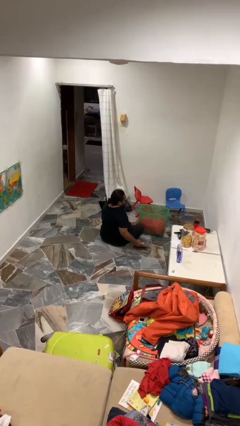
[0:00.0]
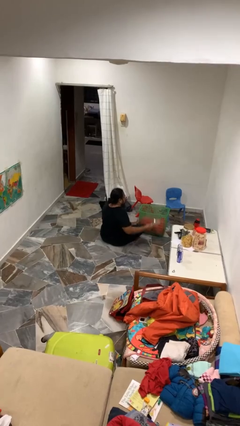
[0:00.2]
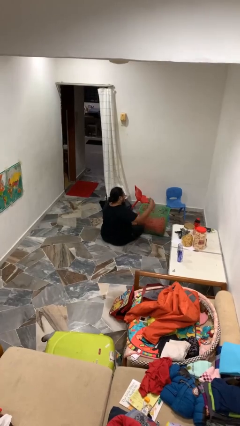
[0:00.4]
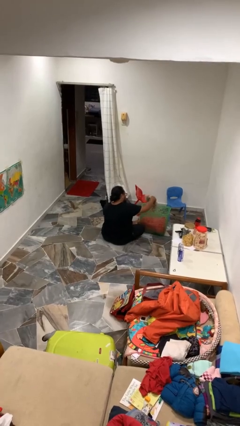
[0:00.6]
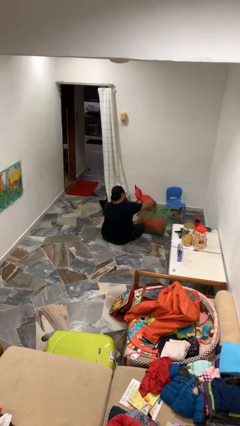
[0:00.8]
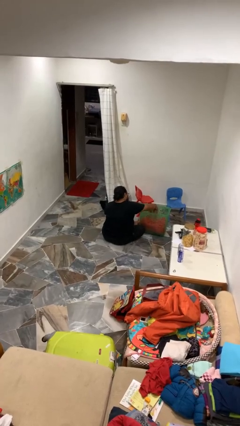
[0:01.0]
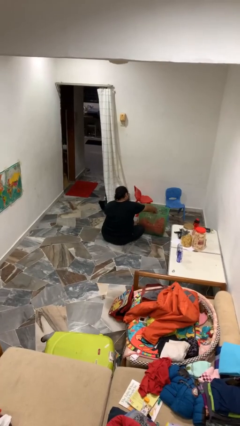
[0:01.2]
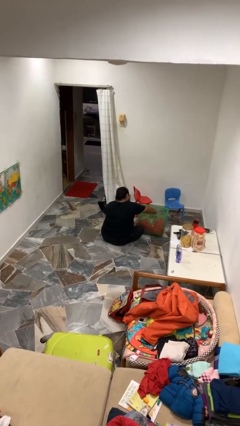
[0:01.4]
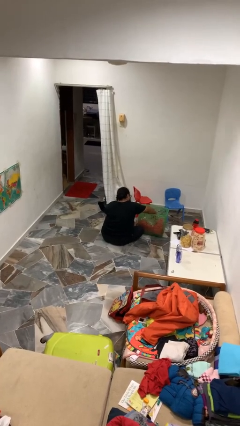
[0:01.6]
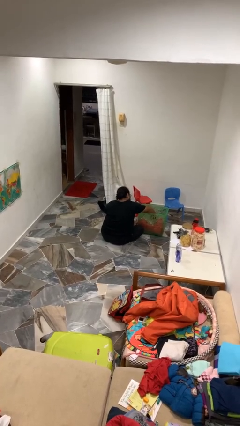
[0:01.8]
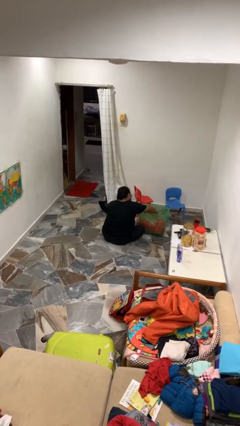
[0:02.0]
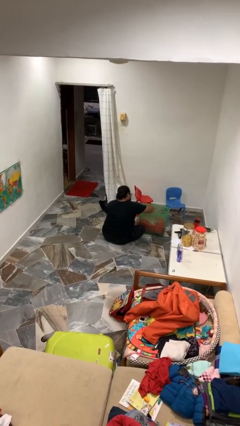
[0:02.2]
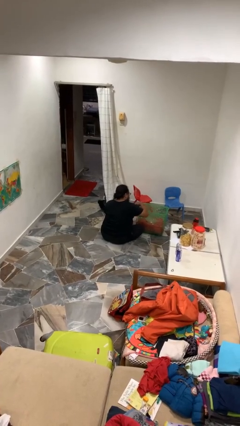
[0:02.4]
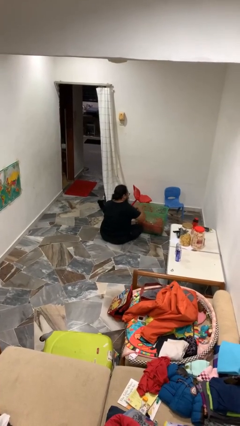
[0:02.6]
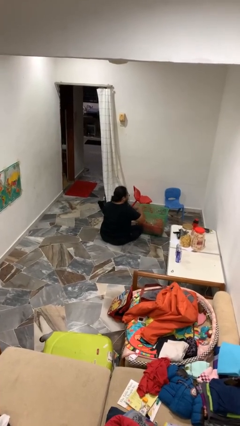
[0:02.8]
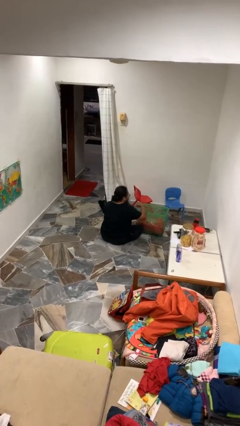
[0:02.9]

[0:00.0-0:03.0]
person puts object into basket

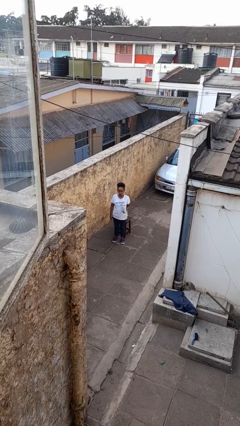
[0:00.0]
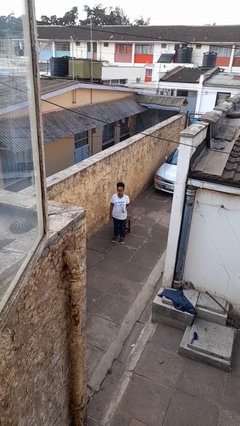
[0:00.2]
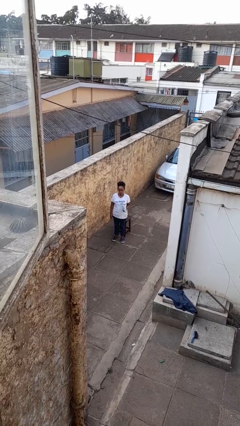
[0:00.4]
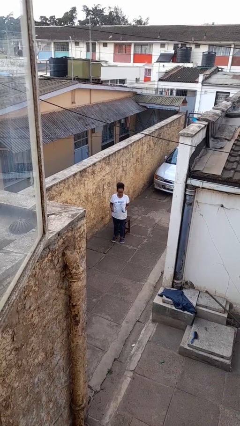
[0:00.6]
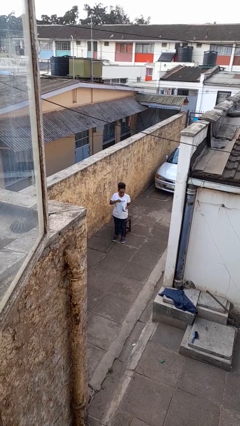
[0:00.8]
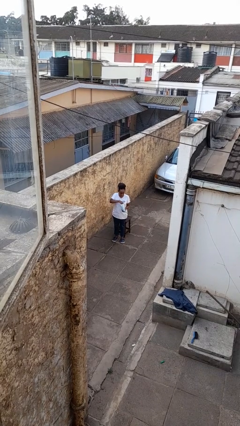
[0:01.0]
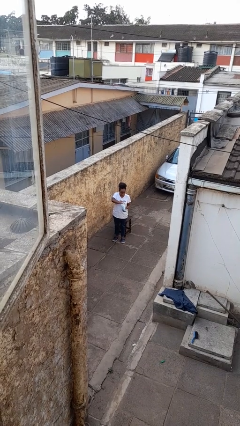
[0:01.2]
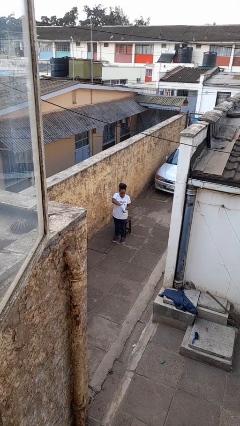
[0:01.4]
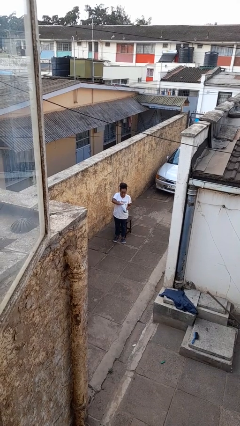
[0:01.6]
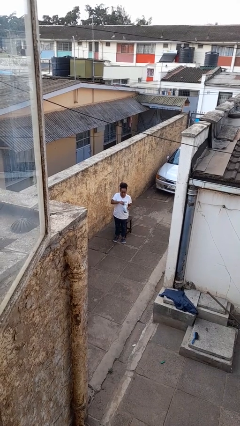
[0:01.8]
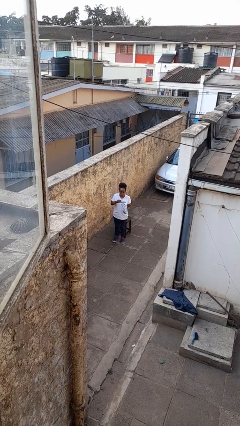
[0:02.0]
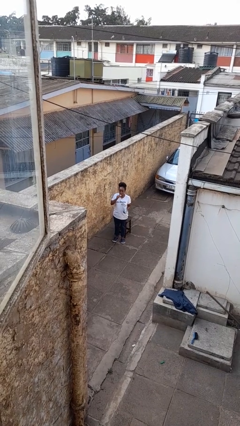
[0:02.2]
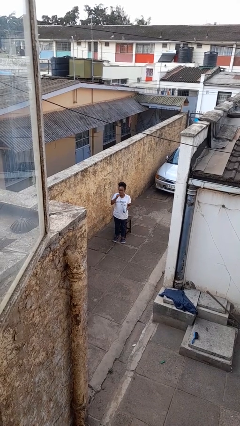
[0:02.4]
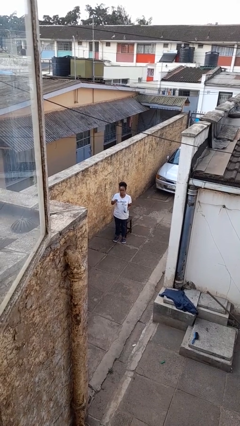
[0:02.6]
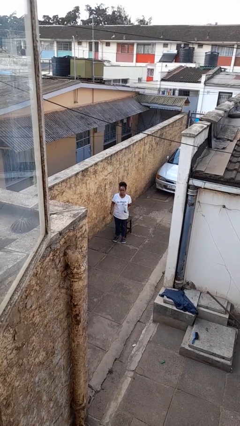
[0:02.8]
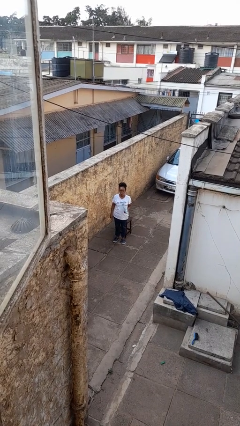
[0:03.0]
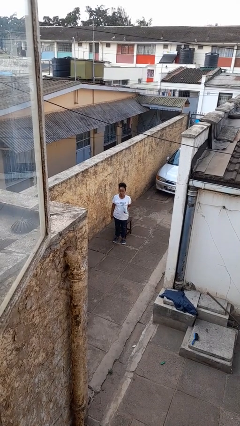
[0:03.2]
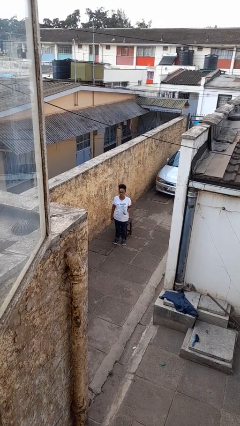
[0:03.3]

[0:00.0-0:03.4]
person eats snack from bag

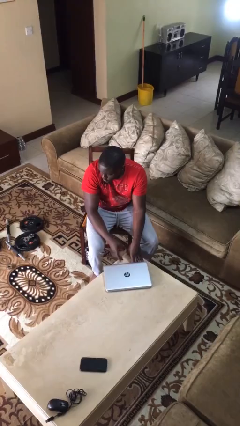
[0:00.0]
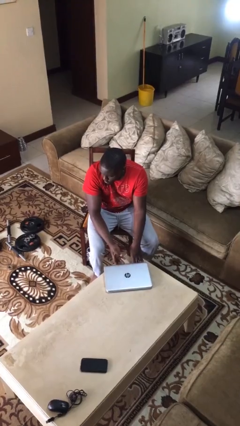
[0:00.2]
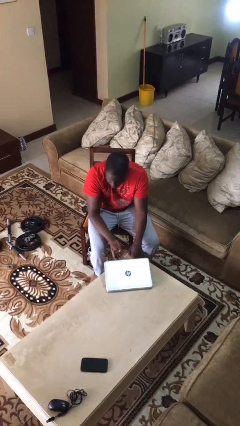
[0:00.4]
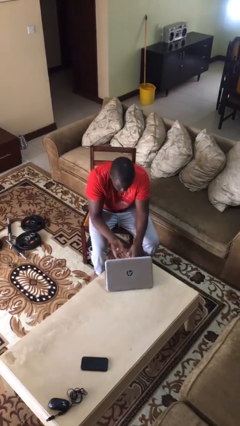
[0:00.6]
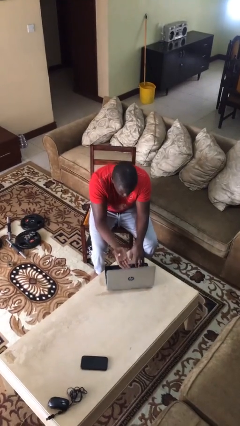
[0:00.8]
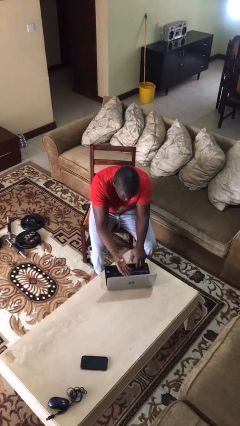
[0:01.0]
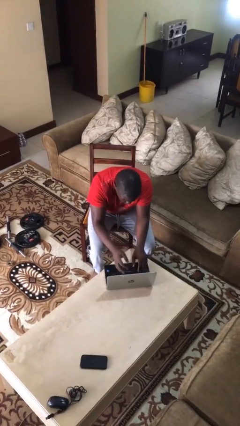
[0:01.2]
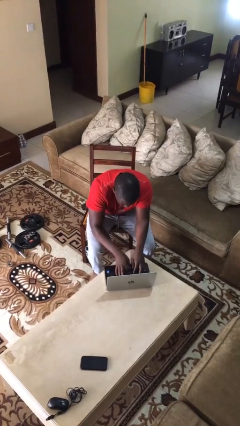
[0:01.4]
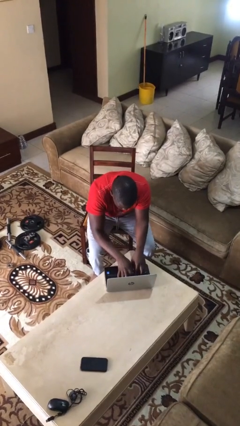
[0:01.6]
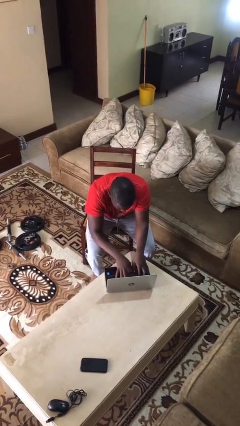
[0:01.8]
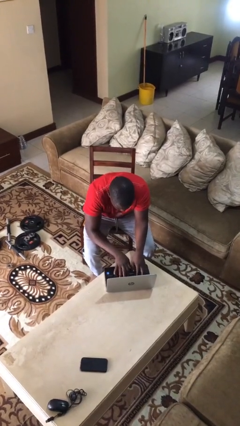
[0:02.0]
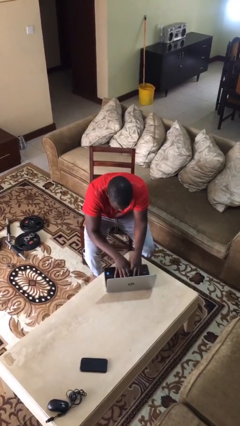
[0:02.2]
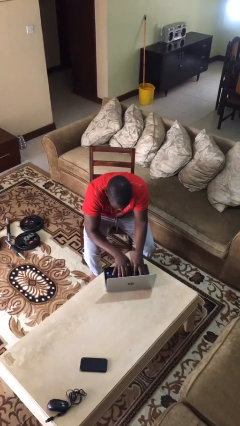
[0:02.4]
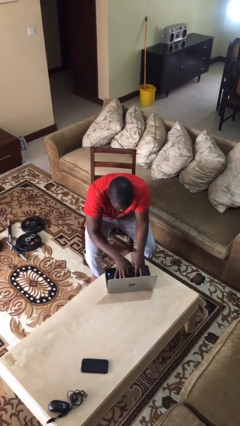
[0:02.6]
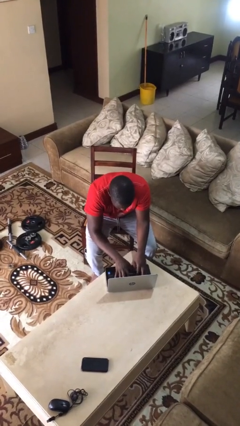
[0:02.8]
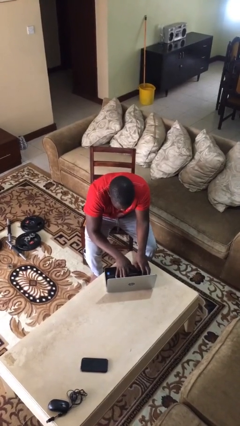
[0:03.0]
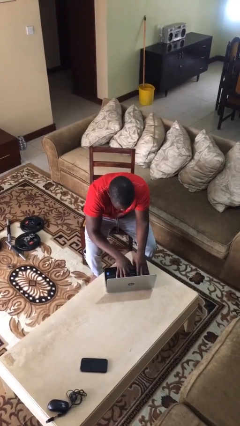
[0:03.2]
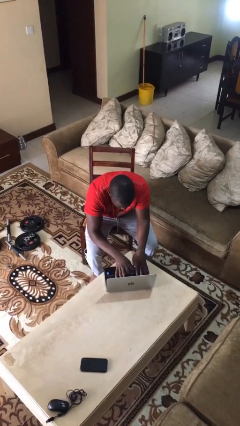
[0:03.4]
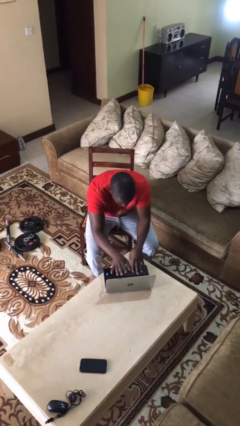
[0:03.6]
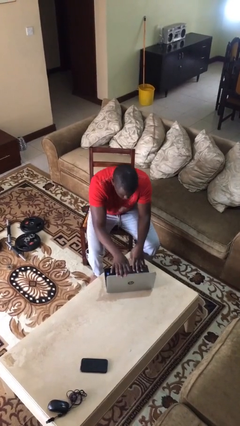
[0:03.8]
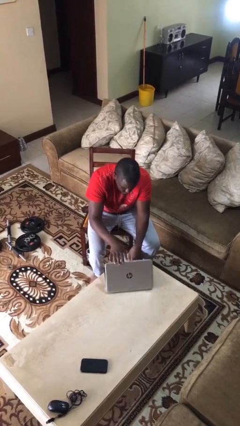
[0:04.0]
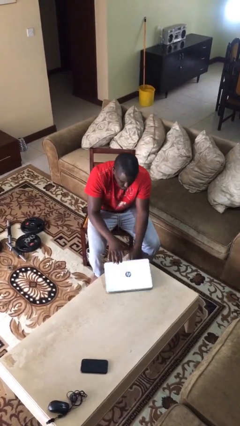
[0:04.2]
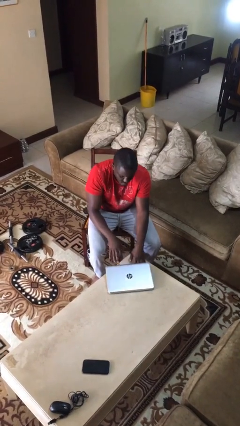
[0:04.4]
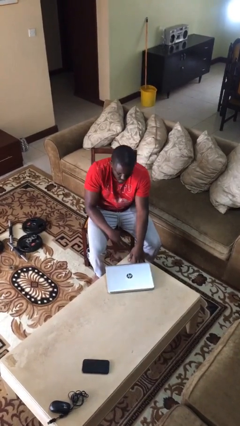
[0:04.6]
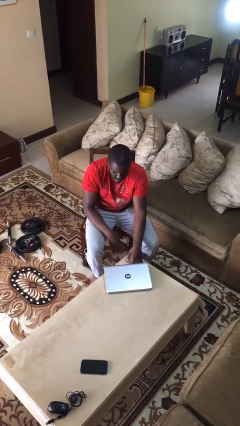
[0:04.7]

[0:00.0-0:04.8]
person interacts with laptop

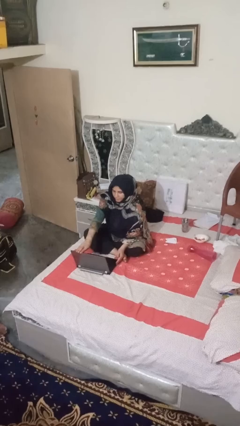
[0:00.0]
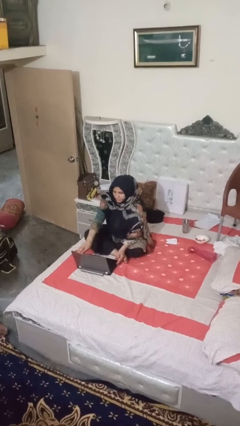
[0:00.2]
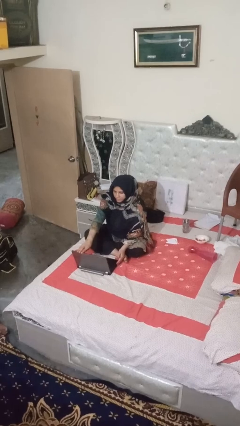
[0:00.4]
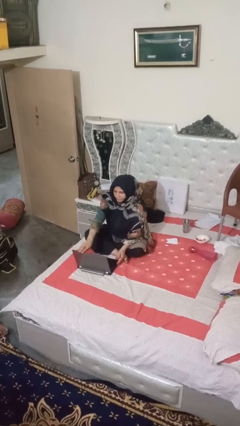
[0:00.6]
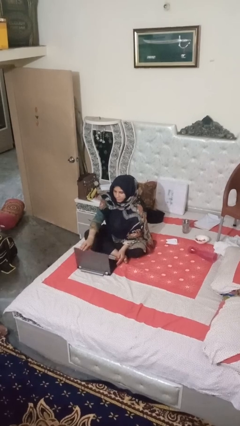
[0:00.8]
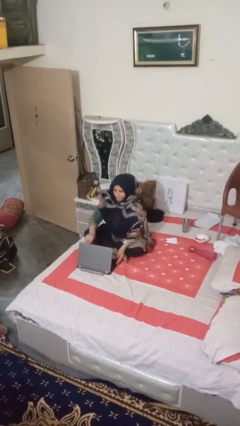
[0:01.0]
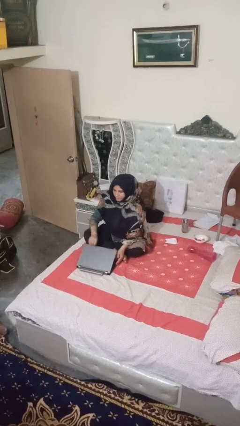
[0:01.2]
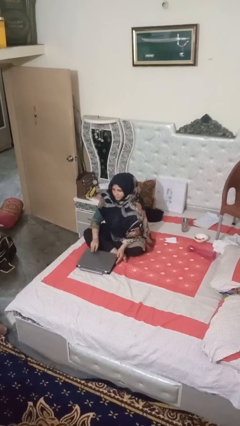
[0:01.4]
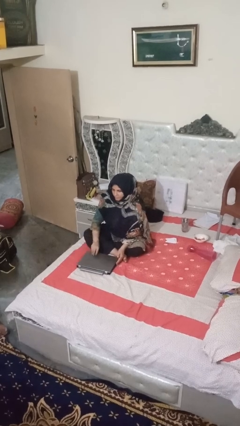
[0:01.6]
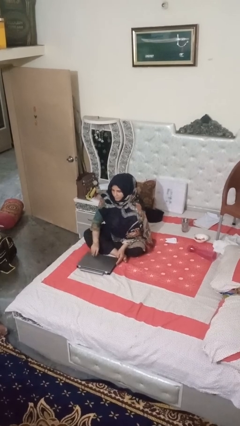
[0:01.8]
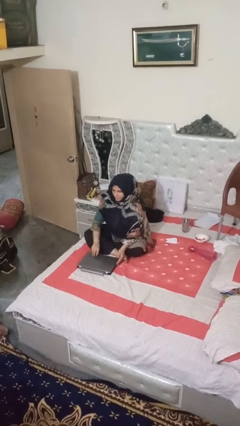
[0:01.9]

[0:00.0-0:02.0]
person closes laptop

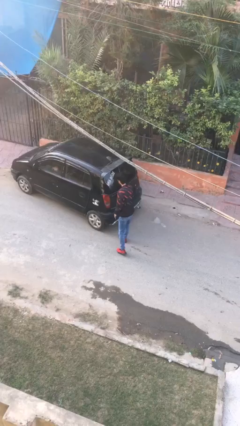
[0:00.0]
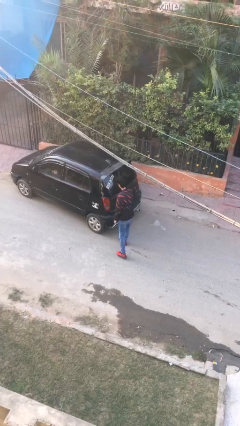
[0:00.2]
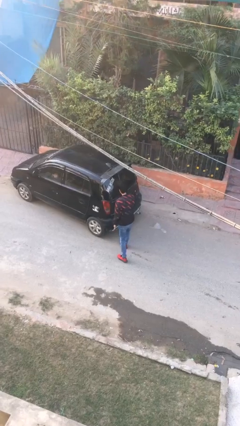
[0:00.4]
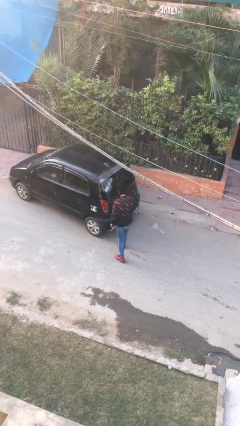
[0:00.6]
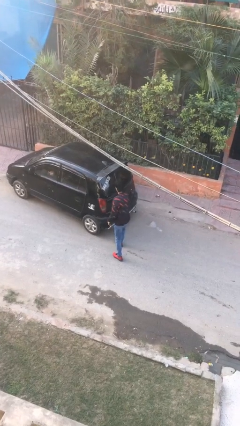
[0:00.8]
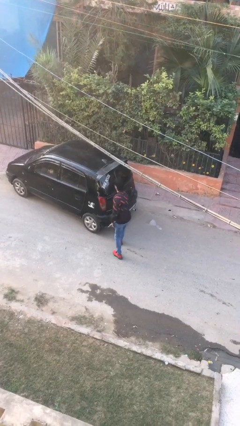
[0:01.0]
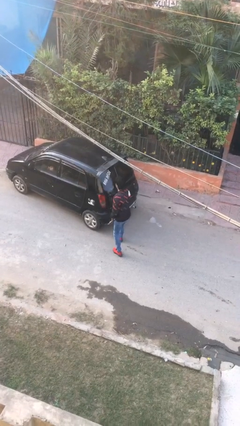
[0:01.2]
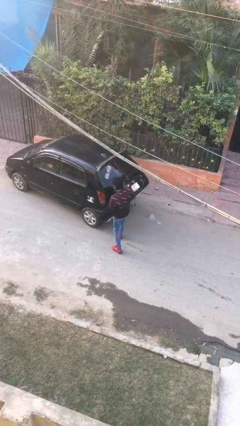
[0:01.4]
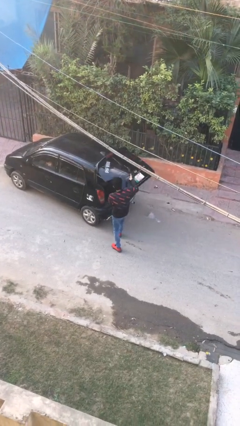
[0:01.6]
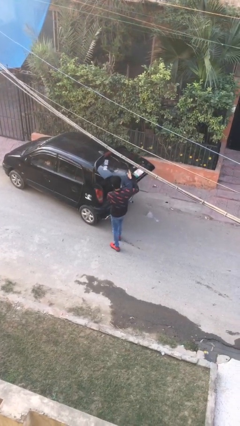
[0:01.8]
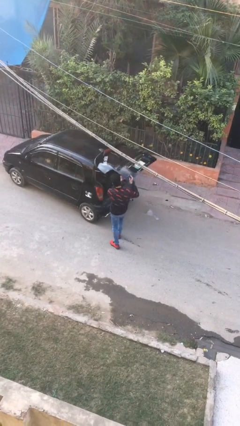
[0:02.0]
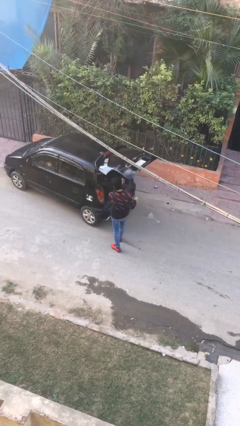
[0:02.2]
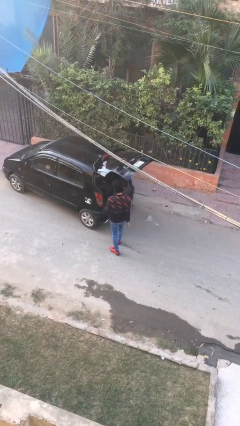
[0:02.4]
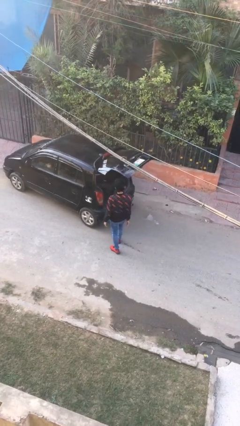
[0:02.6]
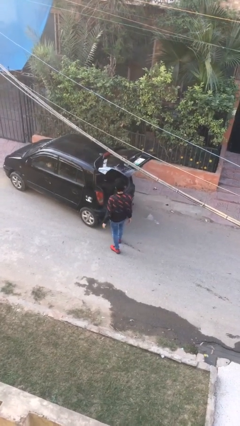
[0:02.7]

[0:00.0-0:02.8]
person opens car trunk

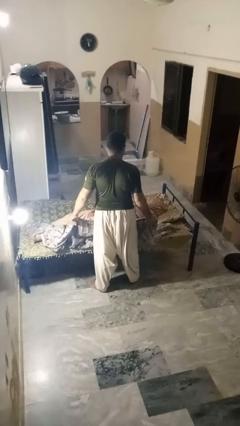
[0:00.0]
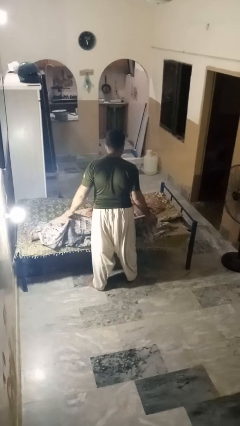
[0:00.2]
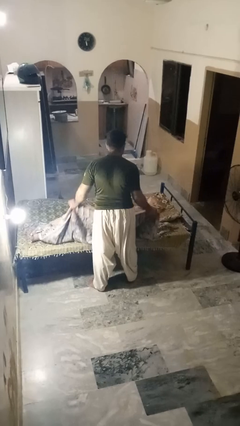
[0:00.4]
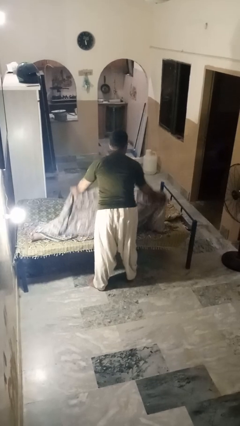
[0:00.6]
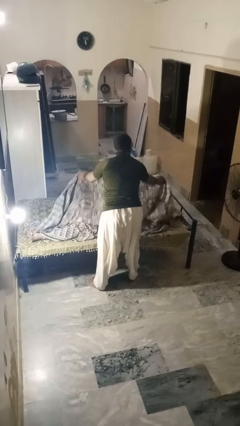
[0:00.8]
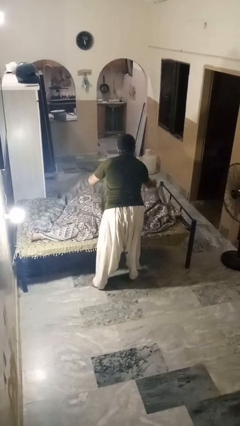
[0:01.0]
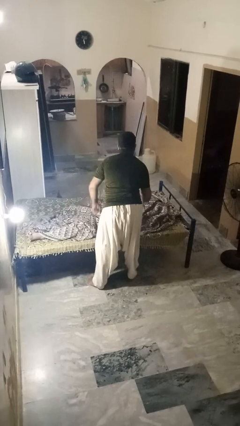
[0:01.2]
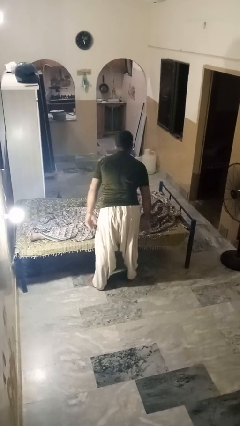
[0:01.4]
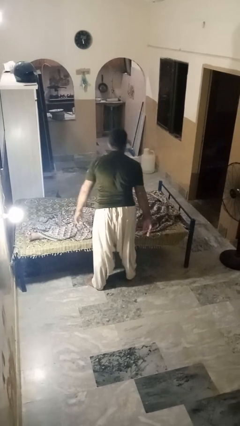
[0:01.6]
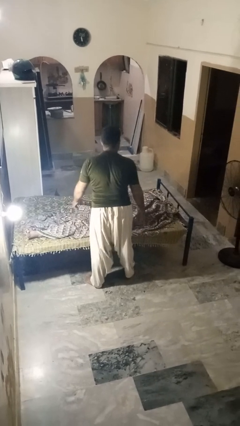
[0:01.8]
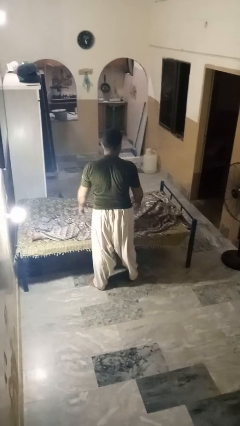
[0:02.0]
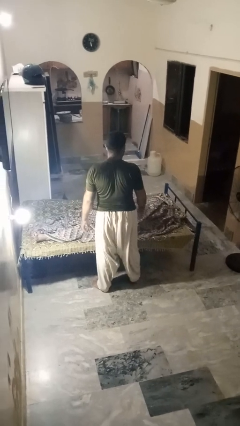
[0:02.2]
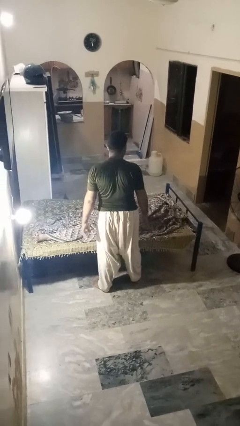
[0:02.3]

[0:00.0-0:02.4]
person covers friend with blanket
